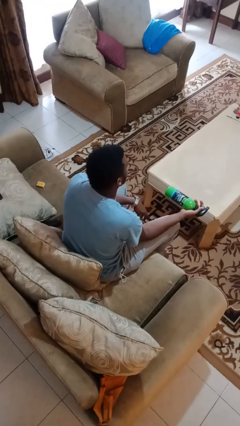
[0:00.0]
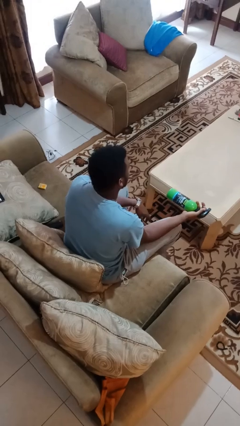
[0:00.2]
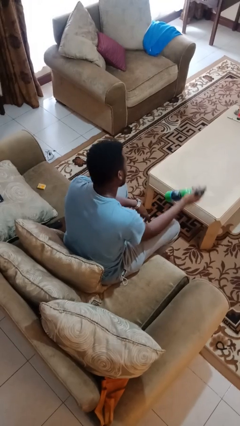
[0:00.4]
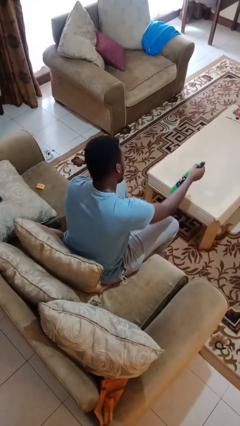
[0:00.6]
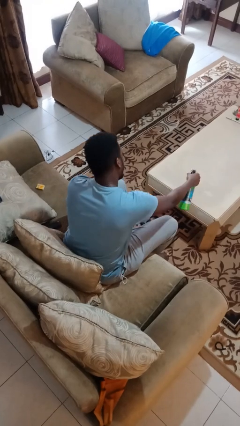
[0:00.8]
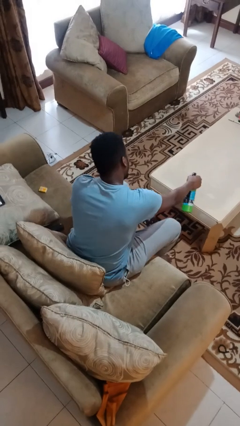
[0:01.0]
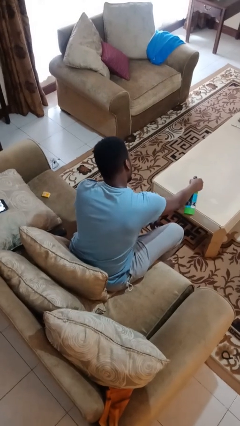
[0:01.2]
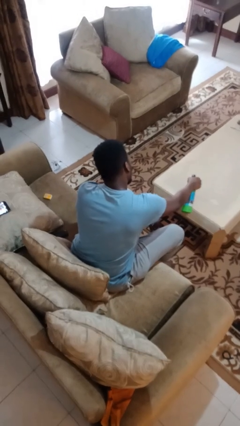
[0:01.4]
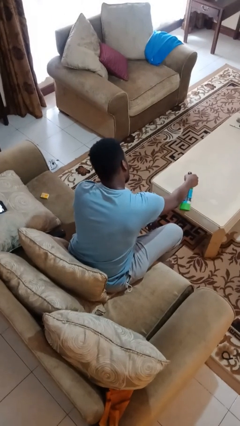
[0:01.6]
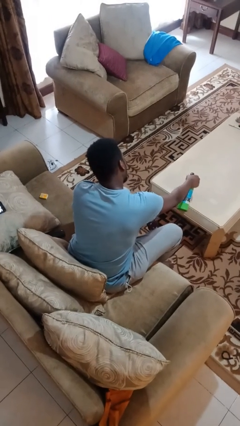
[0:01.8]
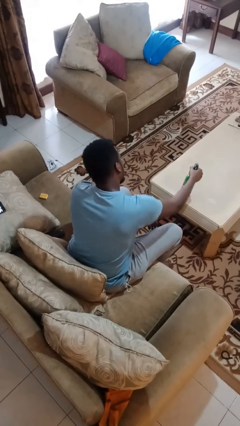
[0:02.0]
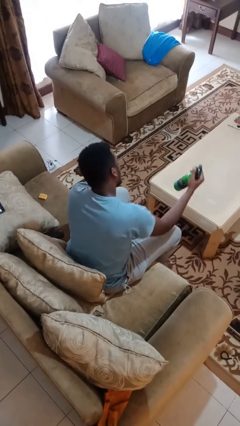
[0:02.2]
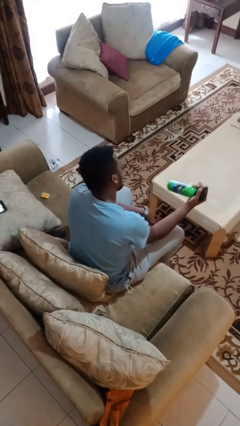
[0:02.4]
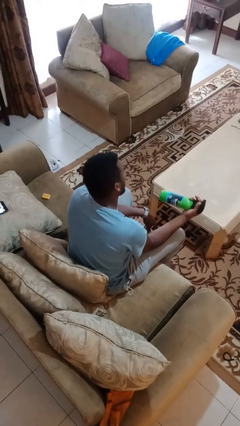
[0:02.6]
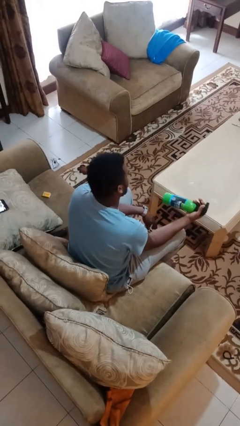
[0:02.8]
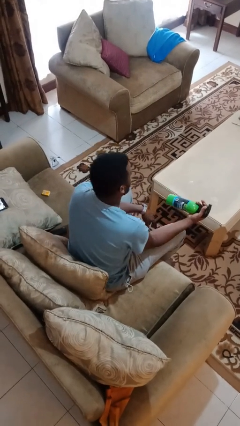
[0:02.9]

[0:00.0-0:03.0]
person sprays from bottle

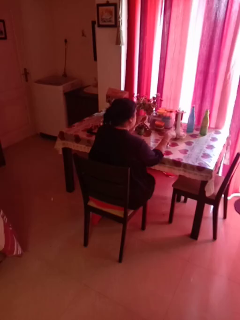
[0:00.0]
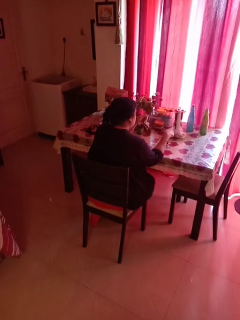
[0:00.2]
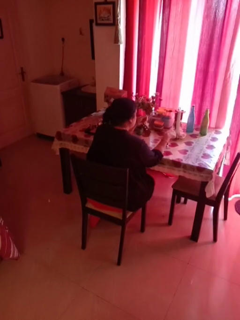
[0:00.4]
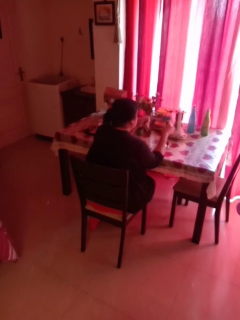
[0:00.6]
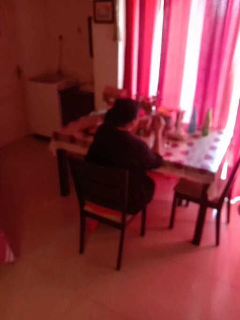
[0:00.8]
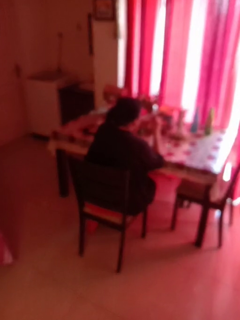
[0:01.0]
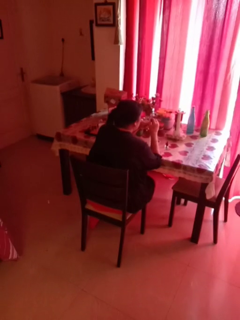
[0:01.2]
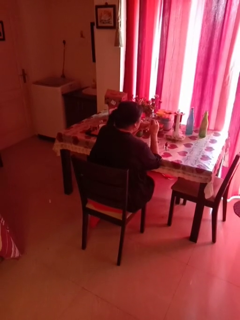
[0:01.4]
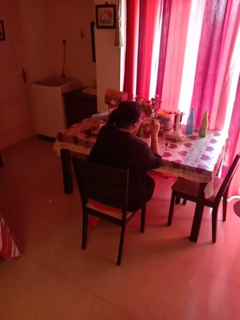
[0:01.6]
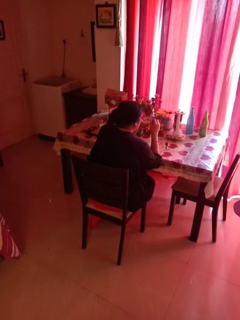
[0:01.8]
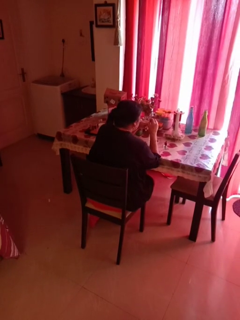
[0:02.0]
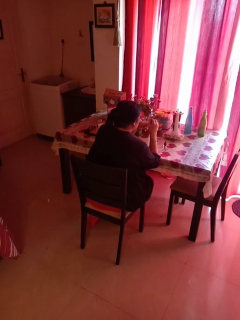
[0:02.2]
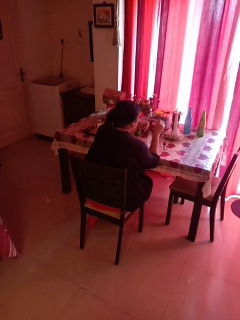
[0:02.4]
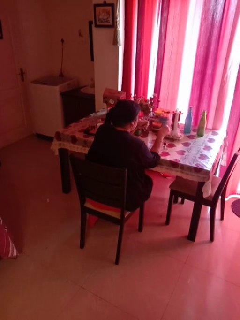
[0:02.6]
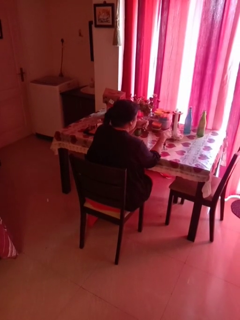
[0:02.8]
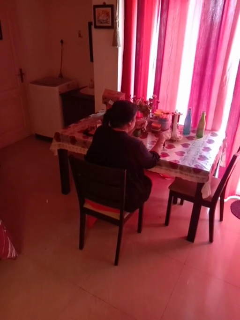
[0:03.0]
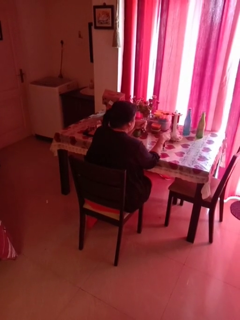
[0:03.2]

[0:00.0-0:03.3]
person paints fingernails

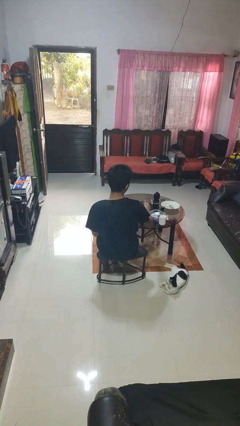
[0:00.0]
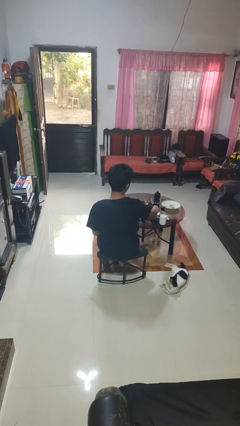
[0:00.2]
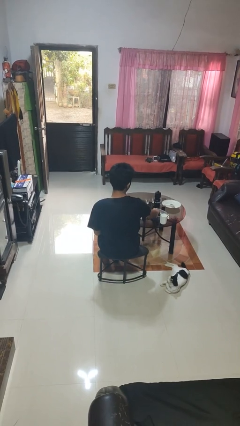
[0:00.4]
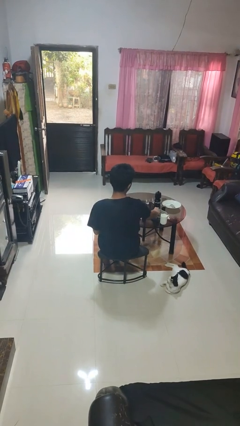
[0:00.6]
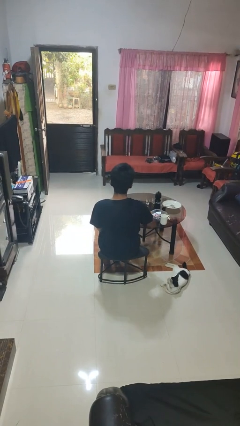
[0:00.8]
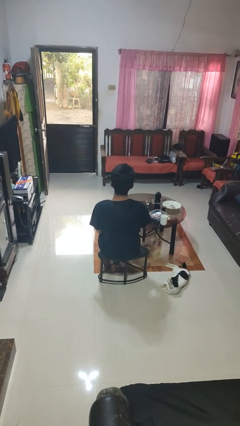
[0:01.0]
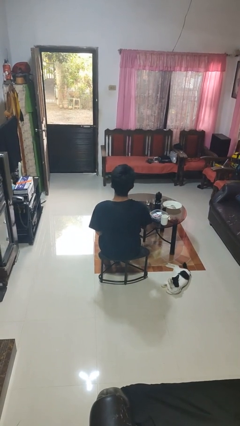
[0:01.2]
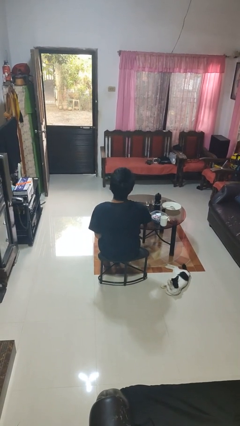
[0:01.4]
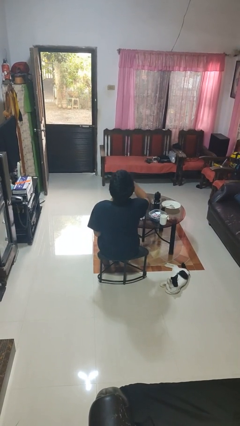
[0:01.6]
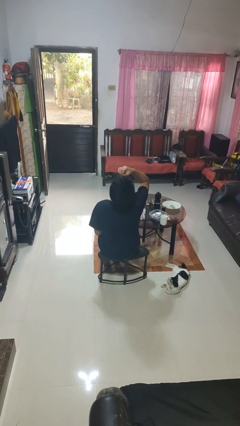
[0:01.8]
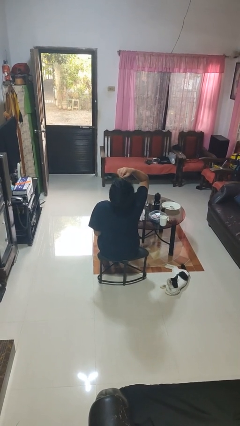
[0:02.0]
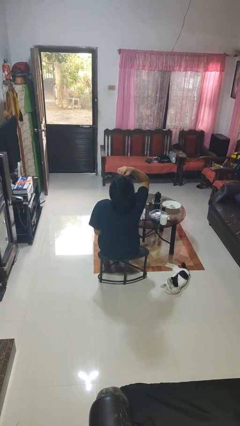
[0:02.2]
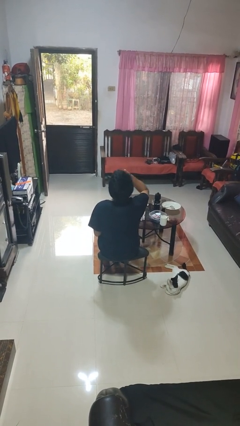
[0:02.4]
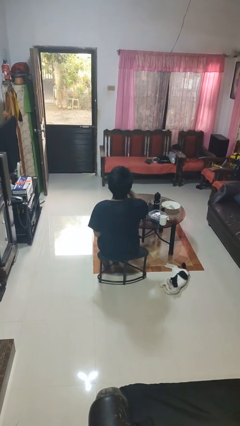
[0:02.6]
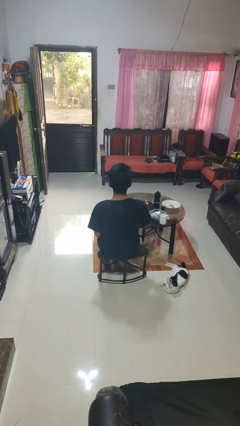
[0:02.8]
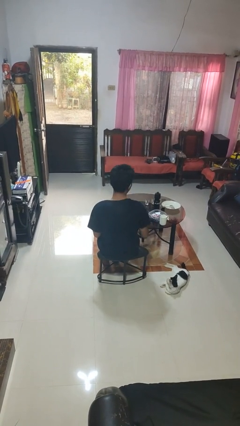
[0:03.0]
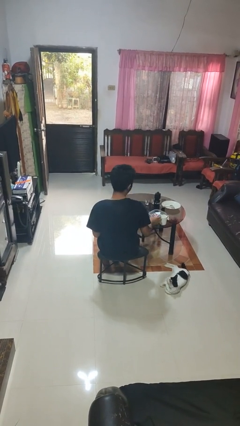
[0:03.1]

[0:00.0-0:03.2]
person takes medicine pills

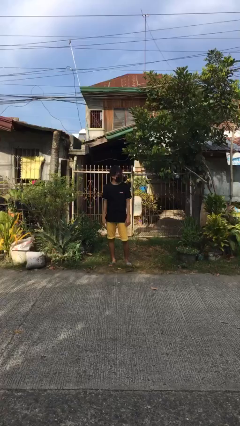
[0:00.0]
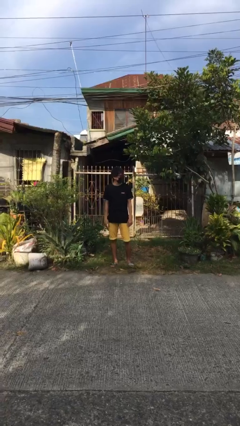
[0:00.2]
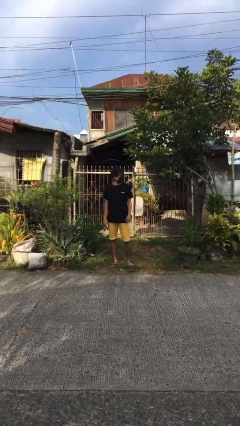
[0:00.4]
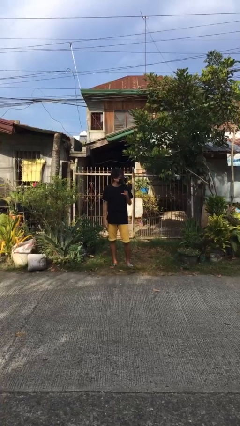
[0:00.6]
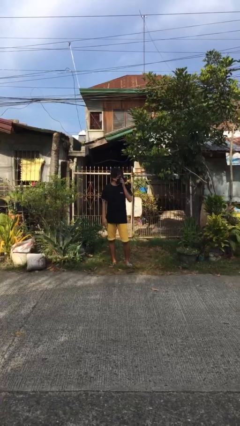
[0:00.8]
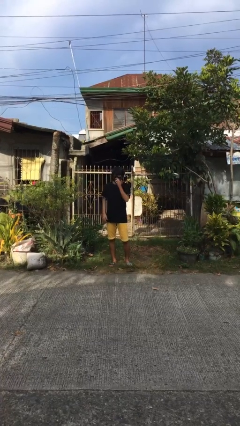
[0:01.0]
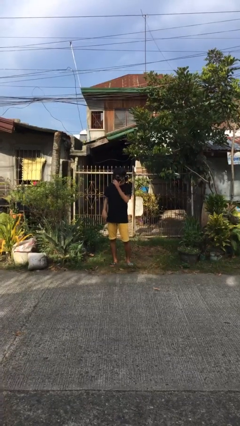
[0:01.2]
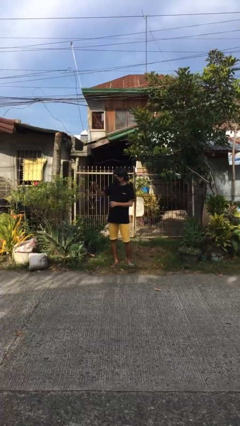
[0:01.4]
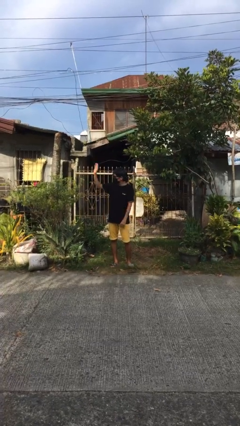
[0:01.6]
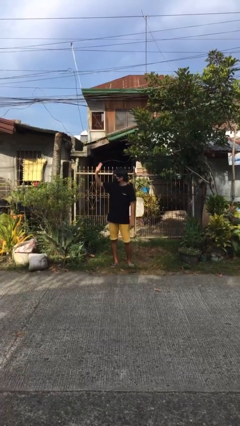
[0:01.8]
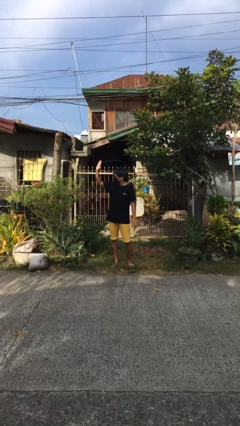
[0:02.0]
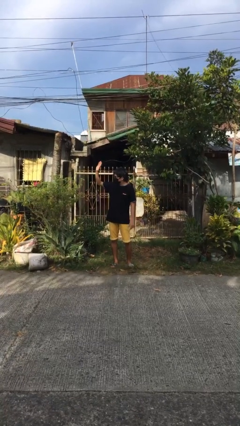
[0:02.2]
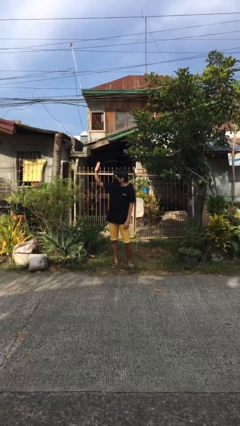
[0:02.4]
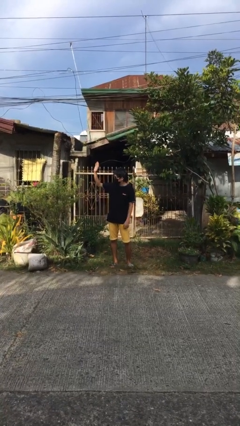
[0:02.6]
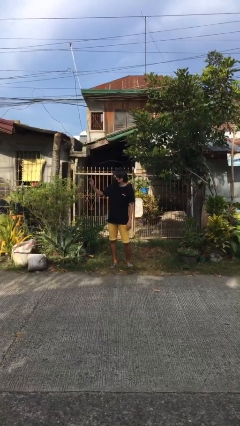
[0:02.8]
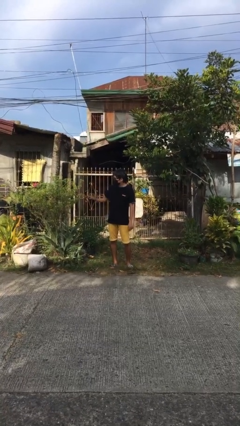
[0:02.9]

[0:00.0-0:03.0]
person waves at person

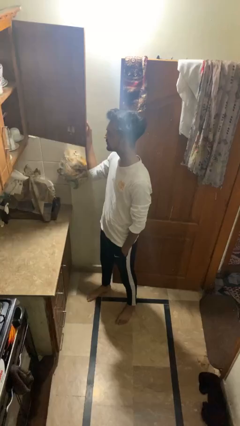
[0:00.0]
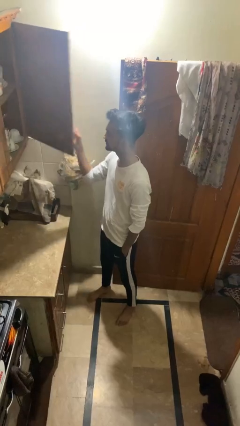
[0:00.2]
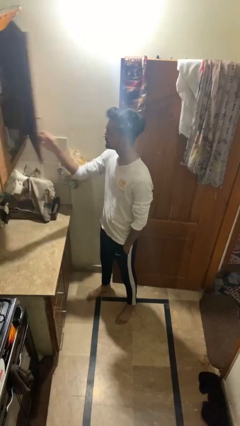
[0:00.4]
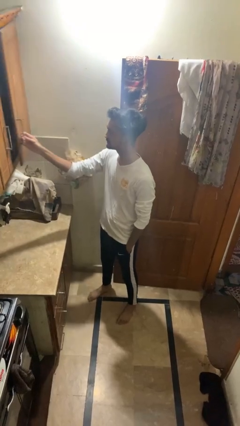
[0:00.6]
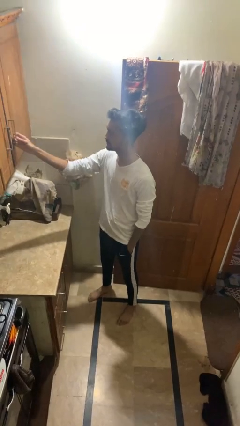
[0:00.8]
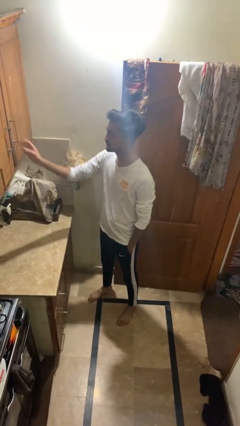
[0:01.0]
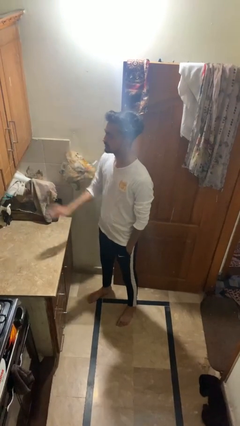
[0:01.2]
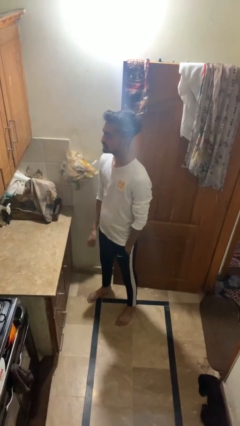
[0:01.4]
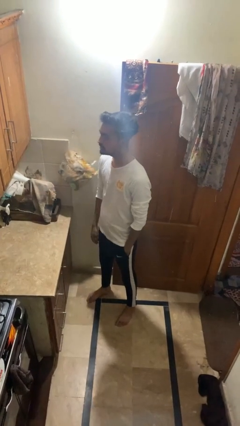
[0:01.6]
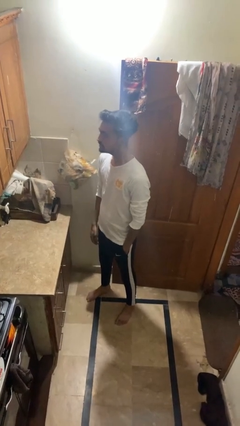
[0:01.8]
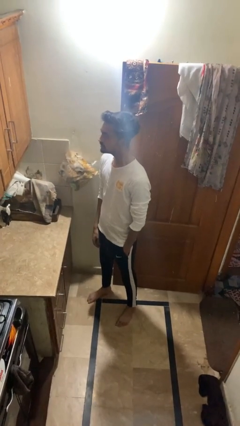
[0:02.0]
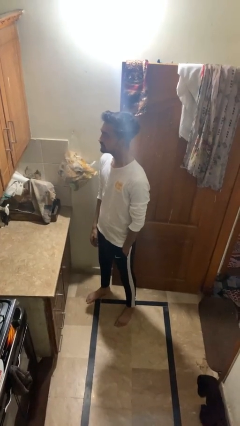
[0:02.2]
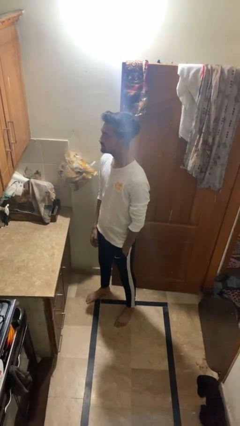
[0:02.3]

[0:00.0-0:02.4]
person closes cabinet

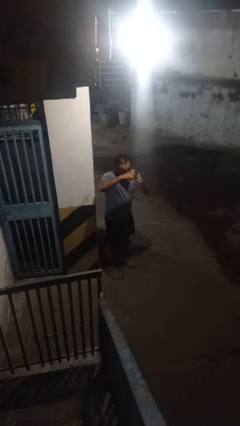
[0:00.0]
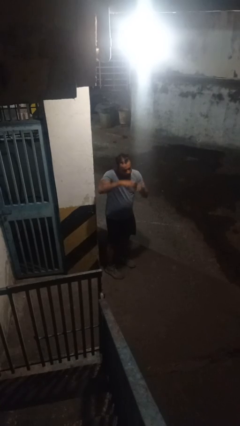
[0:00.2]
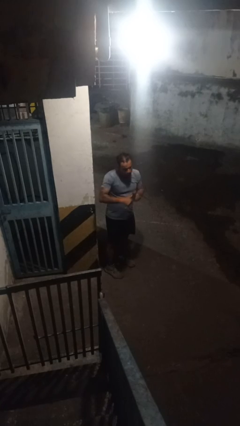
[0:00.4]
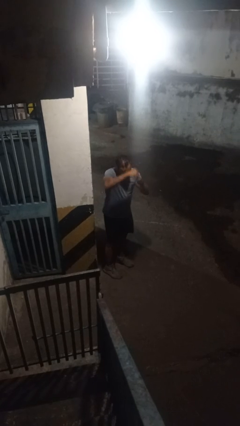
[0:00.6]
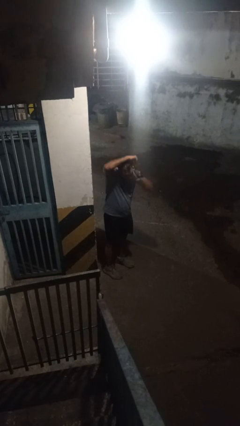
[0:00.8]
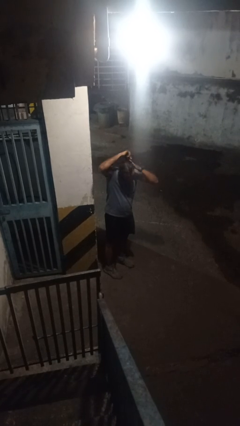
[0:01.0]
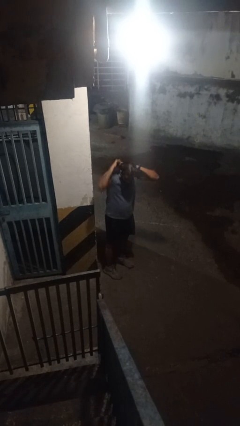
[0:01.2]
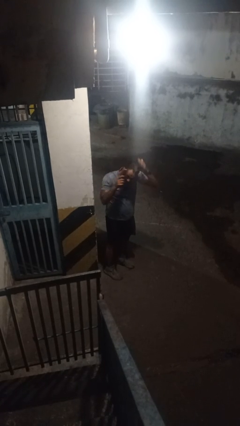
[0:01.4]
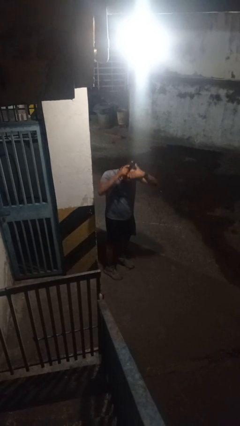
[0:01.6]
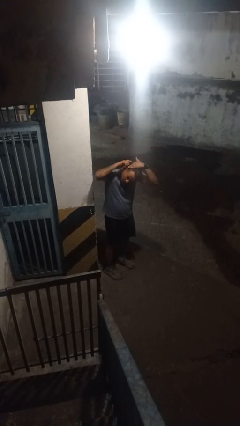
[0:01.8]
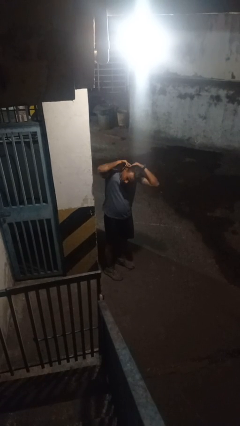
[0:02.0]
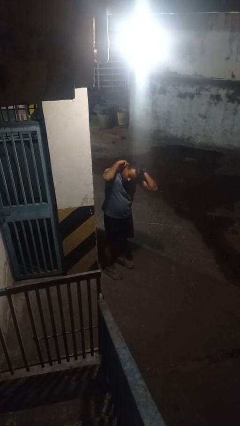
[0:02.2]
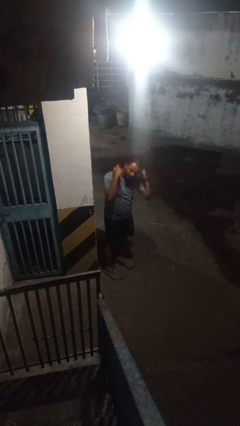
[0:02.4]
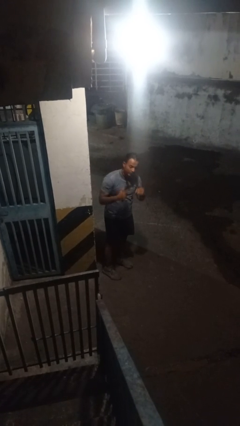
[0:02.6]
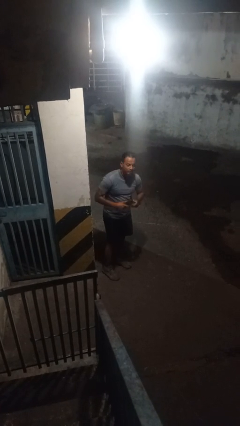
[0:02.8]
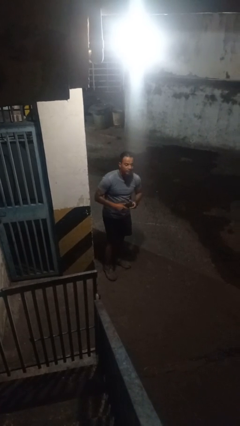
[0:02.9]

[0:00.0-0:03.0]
person brushes hair

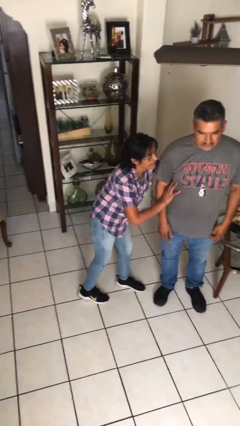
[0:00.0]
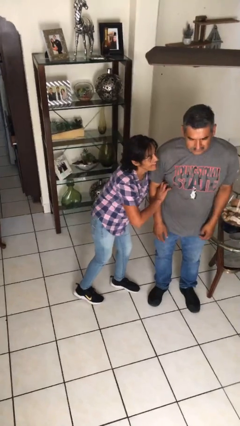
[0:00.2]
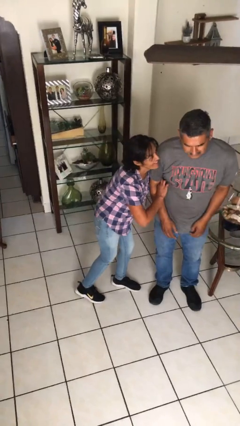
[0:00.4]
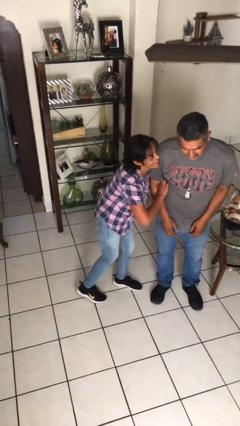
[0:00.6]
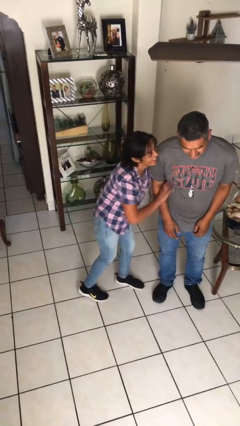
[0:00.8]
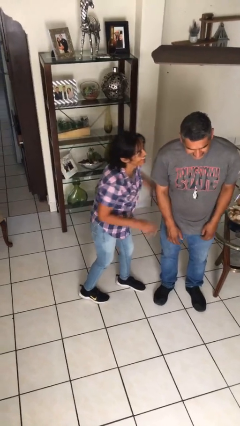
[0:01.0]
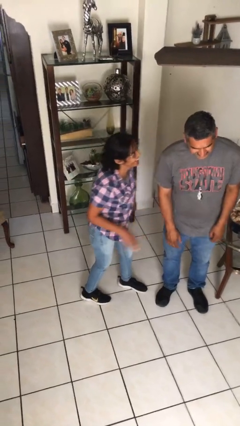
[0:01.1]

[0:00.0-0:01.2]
person tickles person
